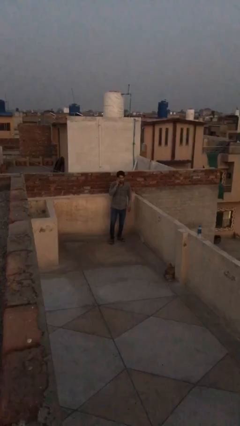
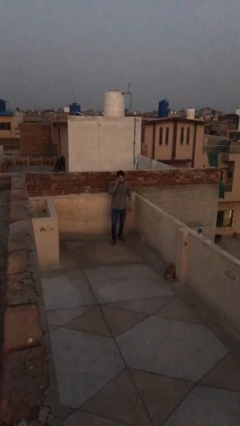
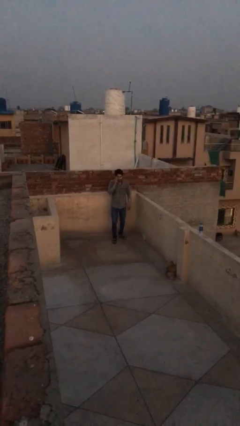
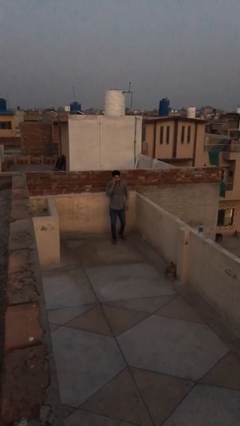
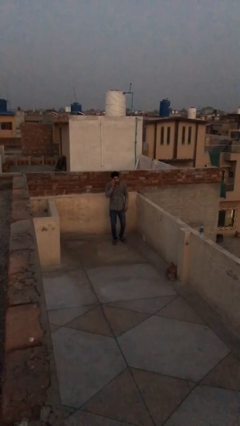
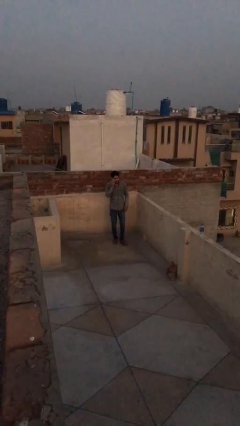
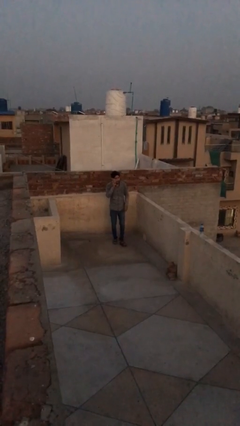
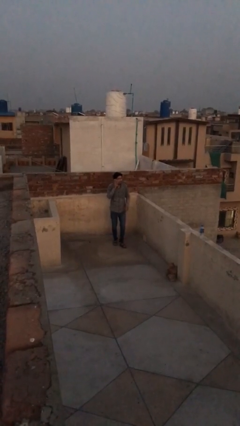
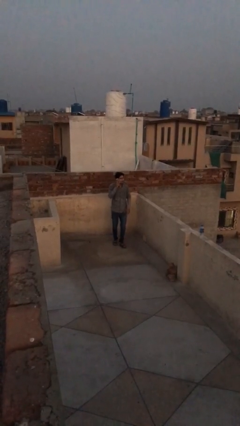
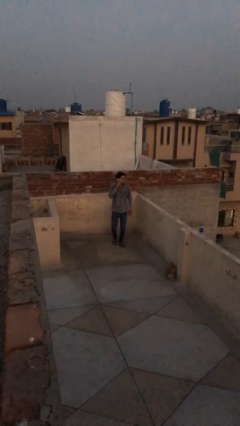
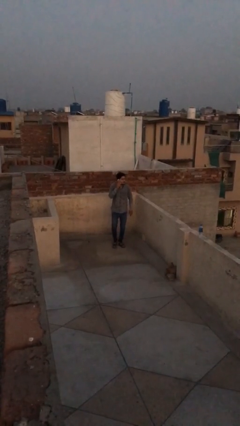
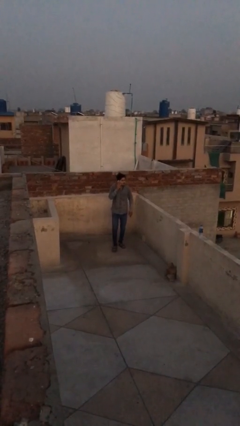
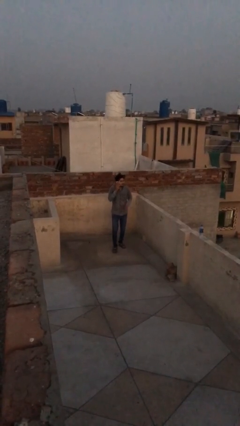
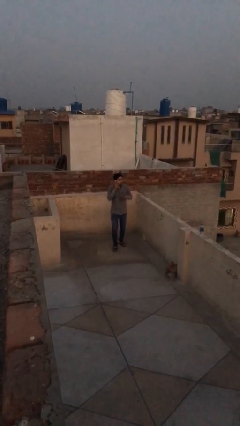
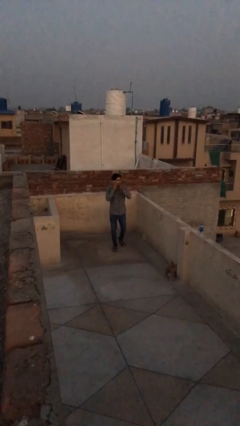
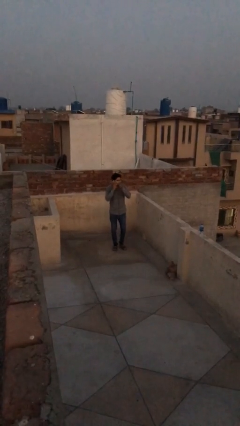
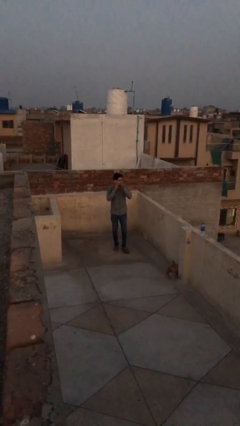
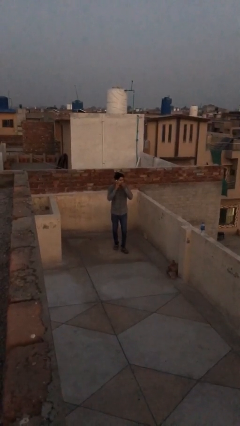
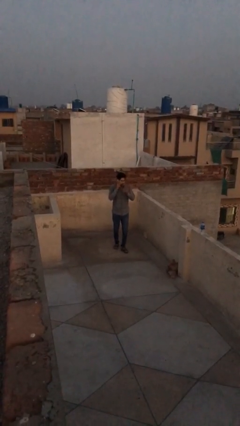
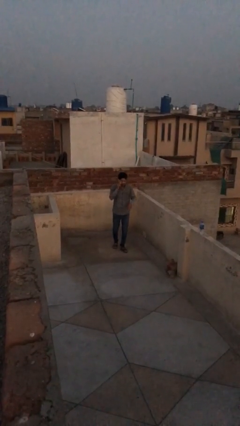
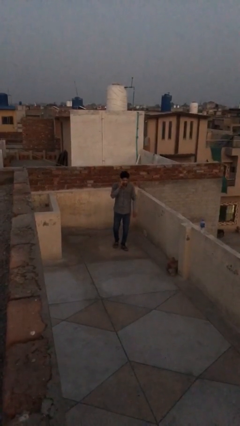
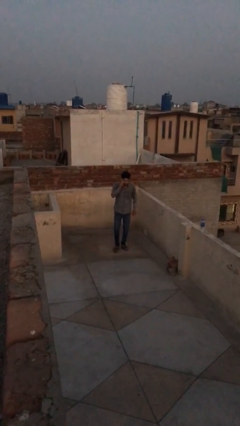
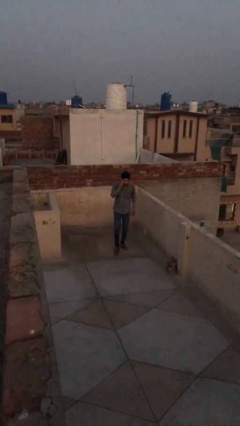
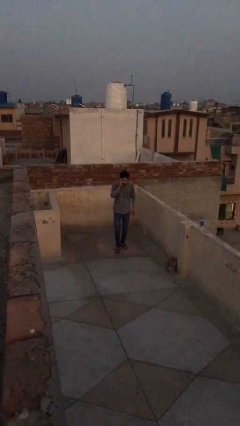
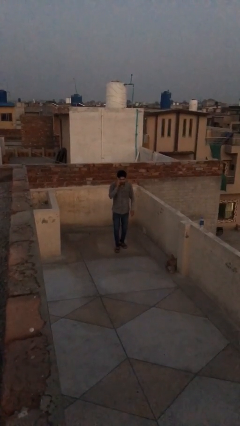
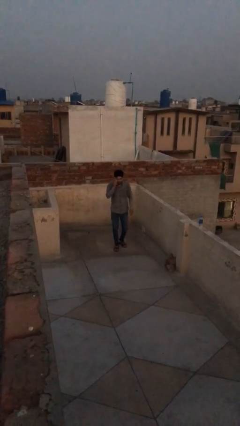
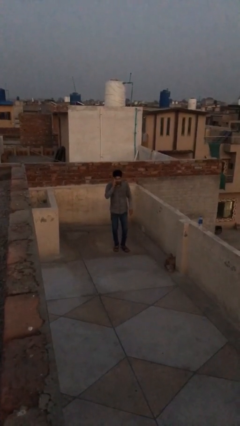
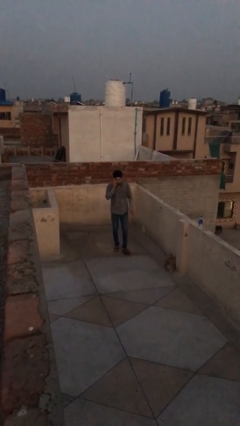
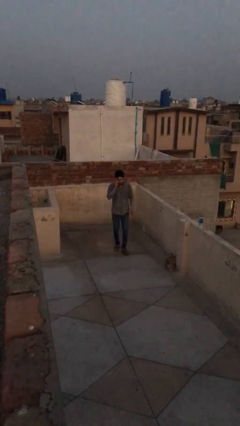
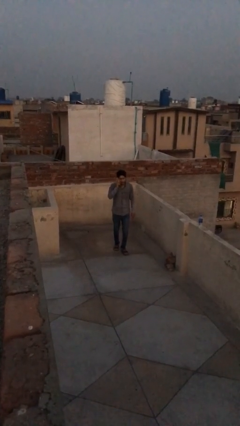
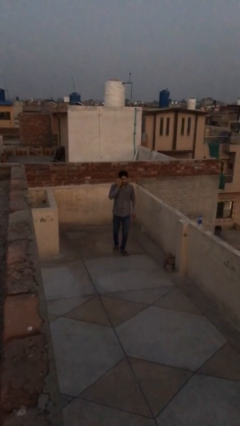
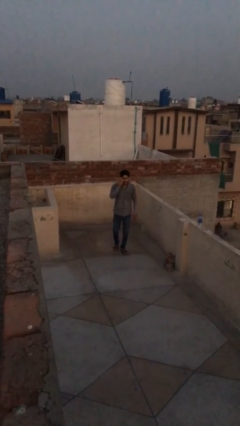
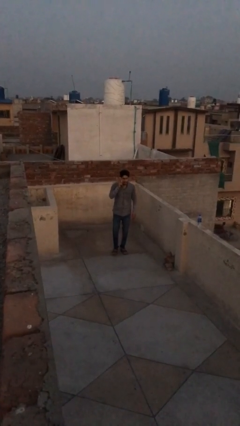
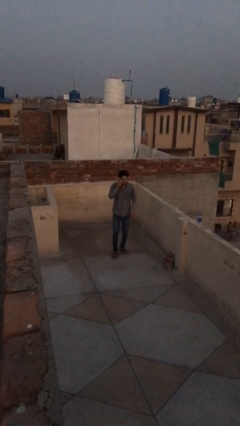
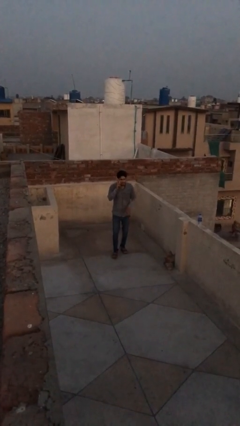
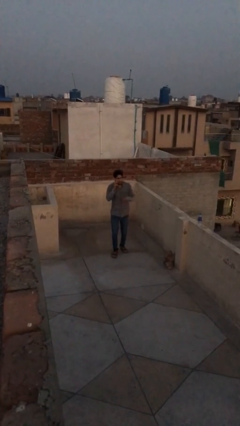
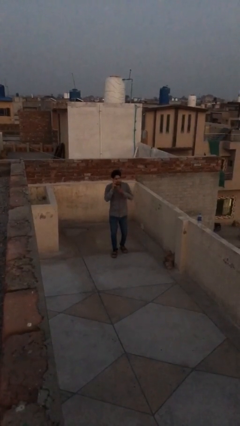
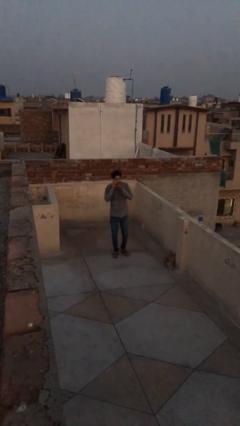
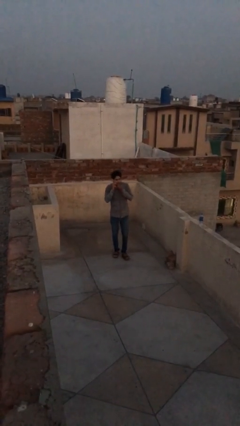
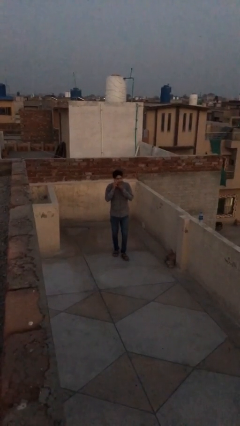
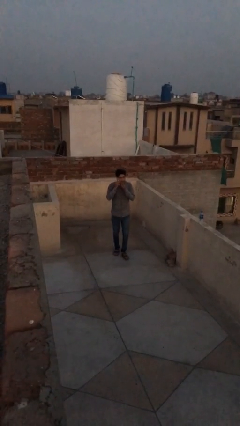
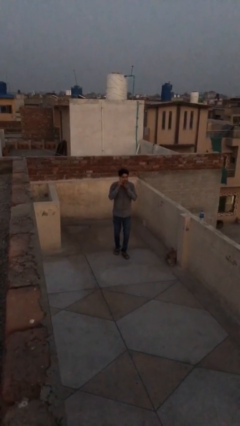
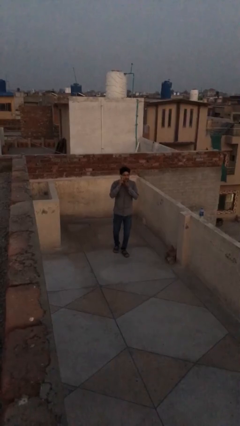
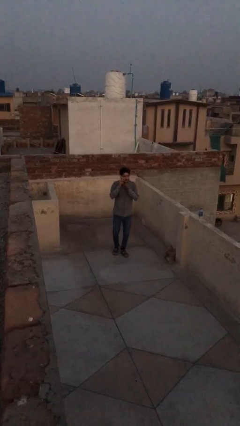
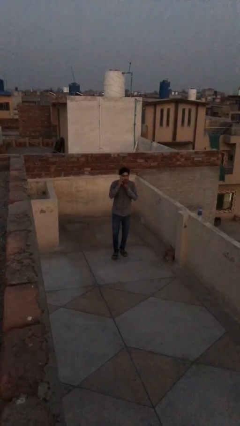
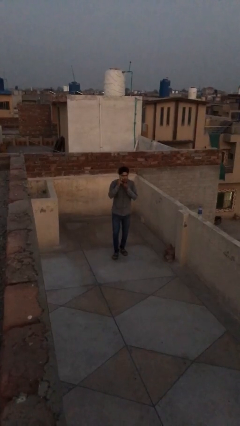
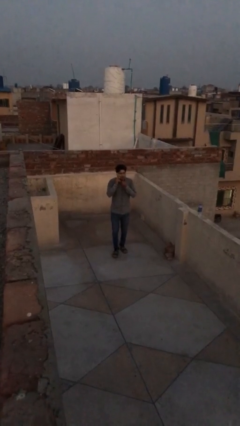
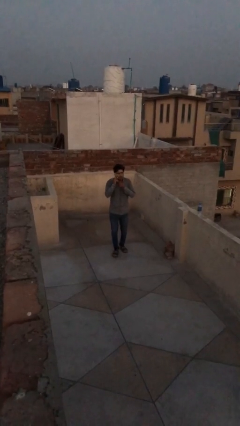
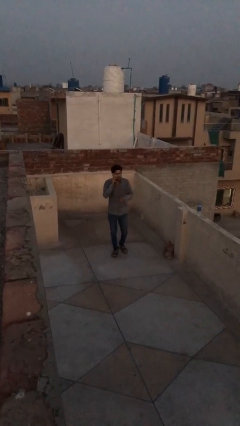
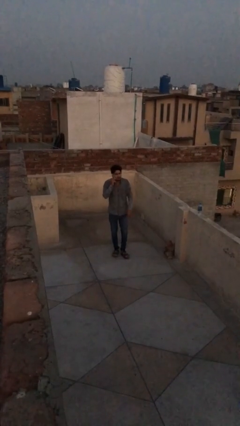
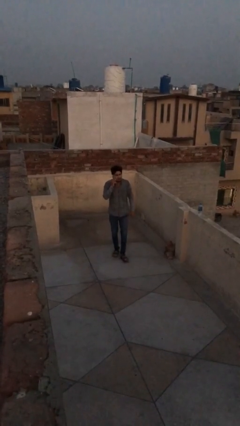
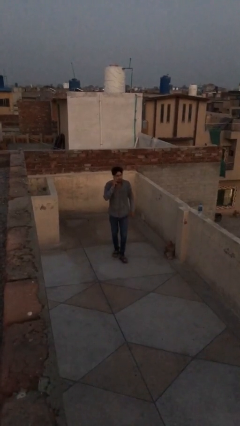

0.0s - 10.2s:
person enters scene through structure

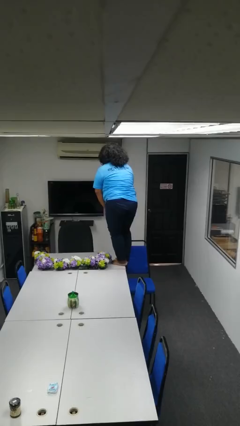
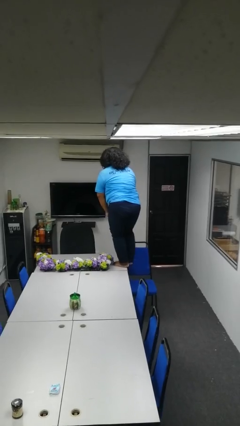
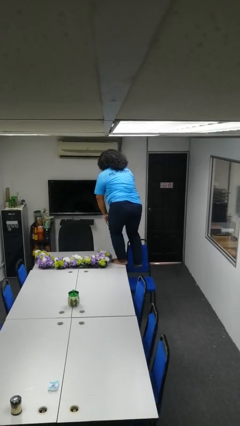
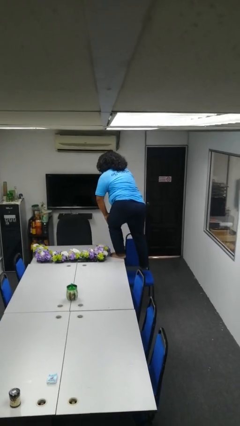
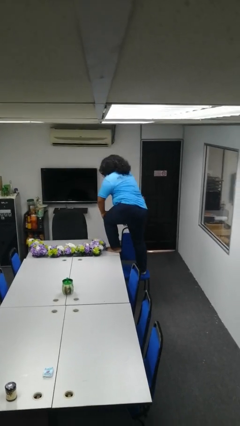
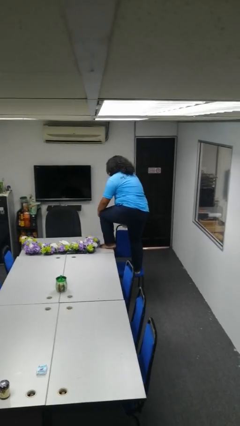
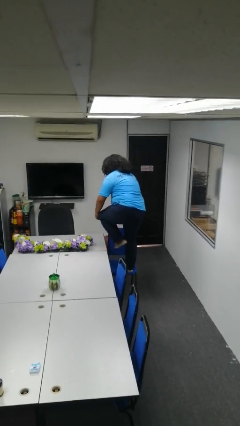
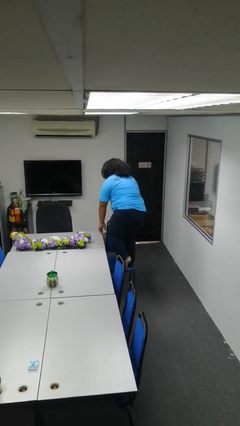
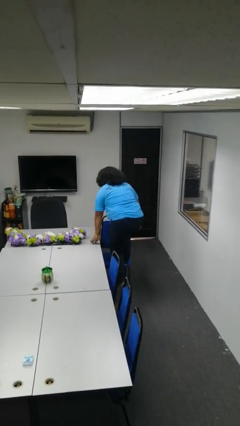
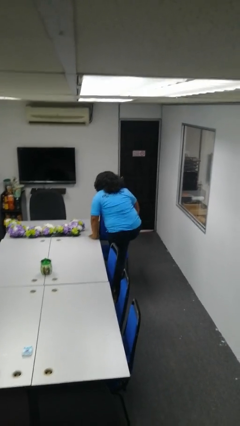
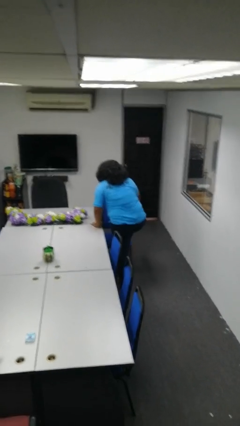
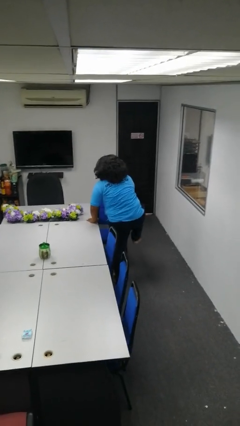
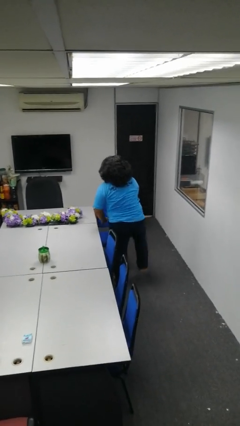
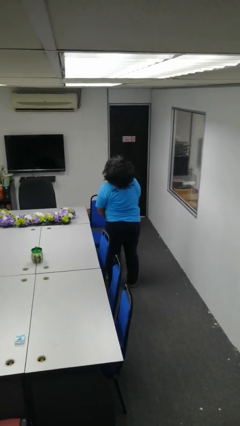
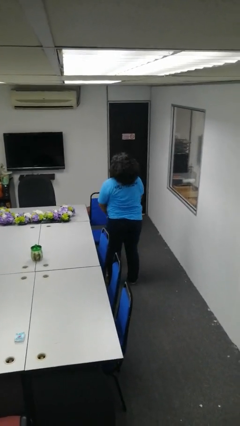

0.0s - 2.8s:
person climbs off table

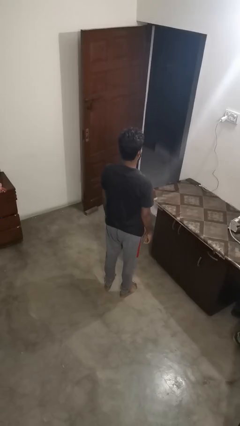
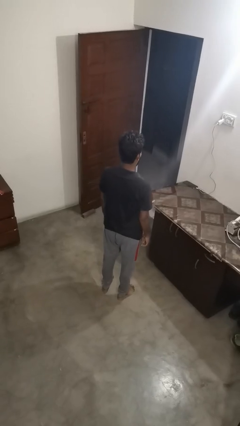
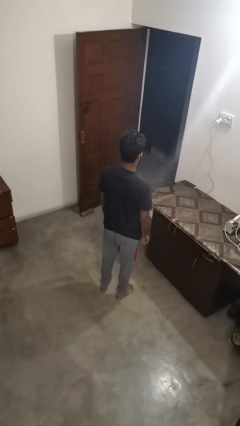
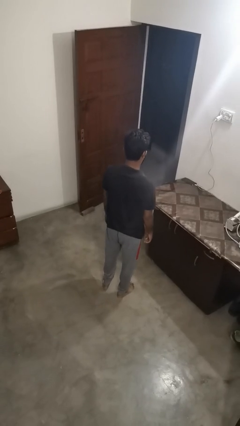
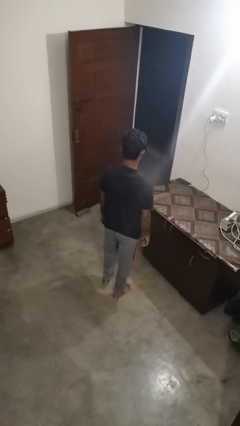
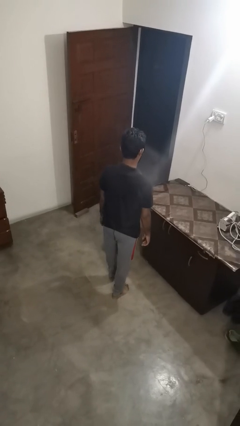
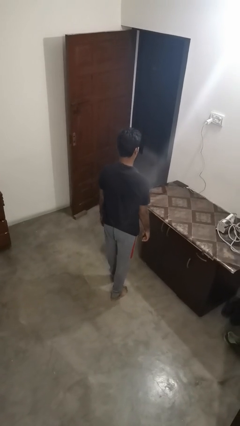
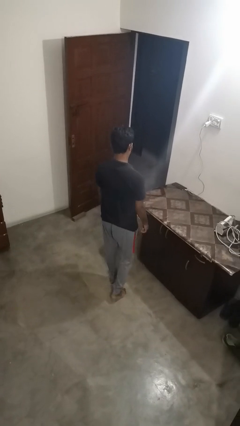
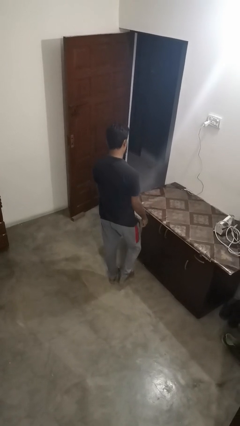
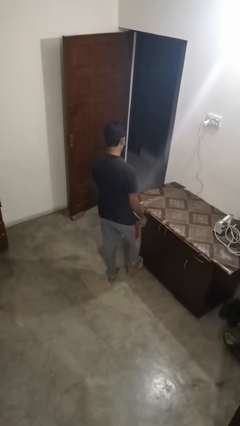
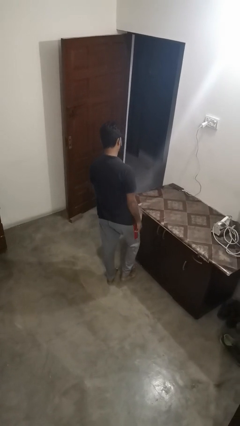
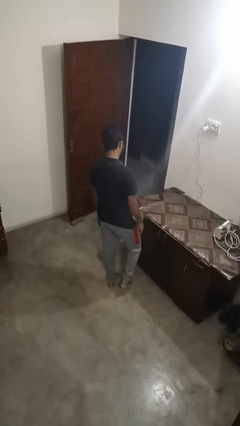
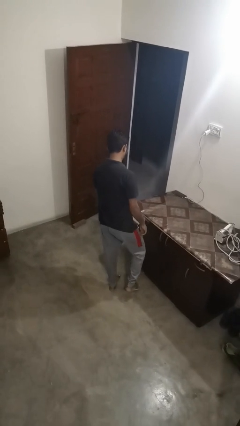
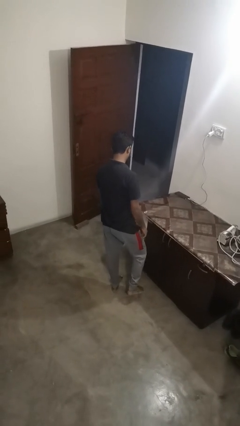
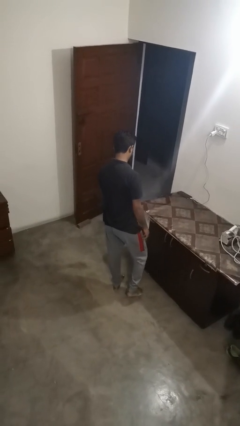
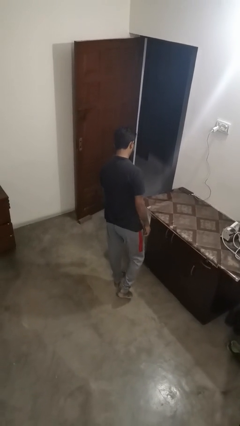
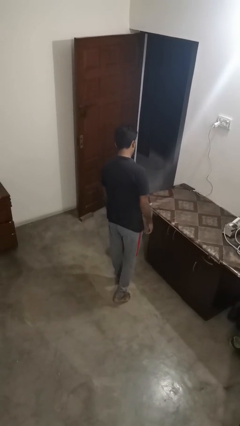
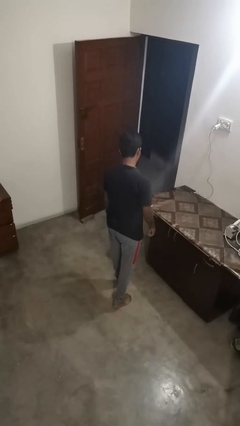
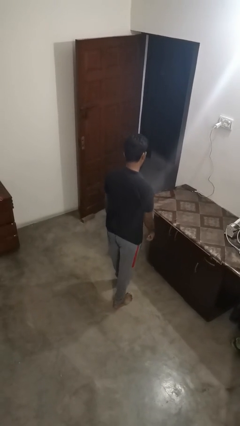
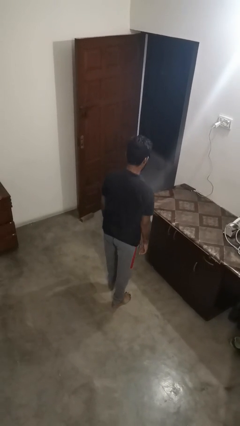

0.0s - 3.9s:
person bumps into table

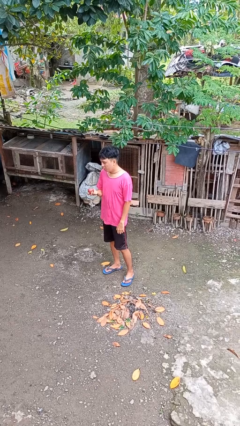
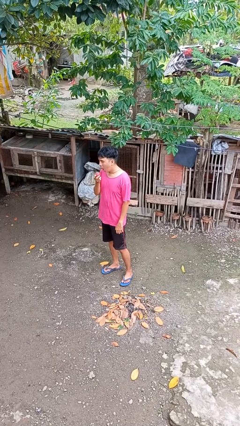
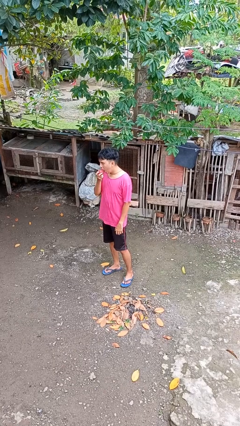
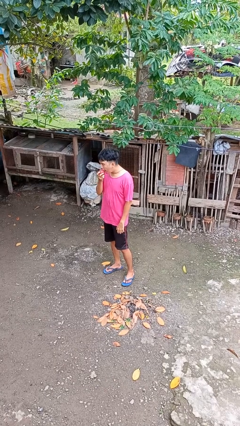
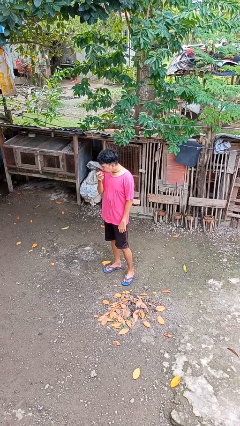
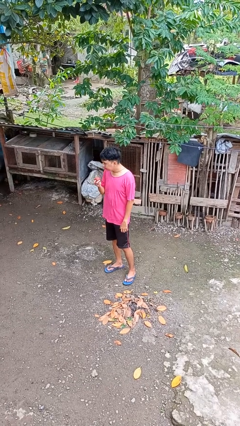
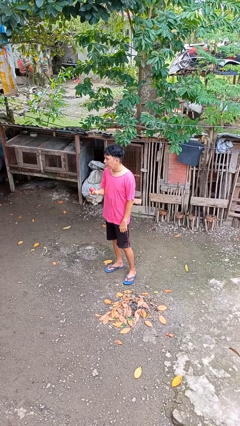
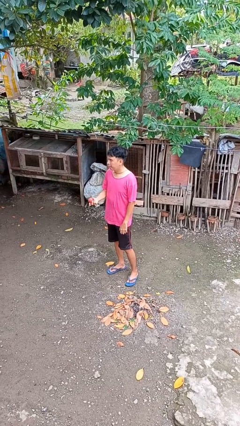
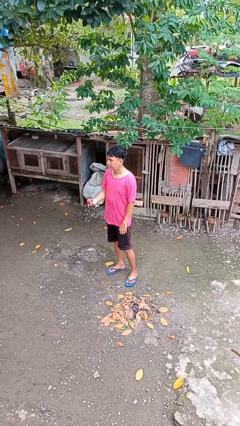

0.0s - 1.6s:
person eats apple
